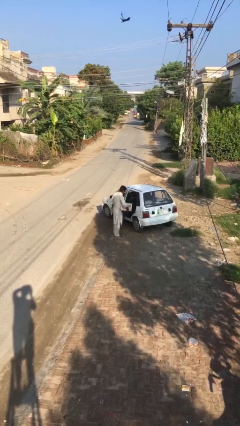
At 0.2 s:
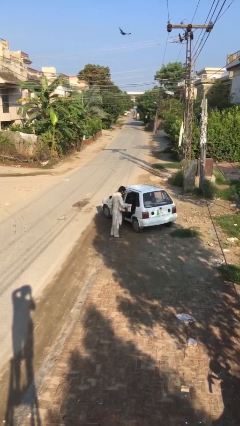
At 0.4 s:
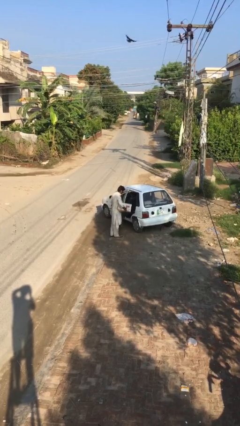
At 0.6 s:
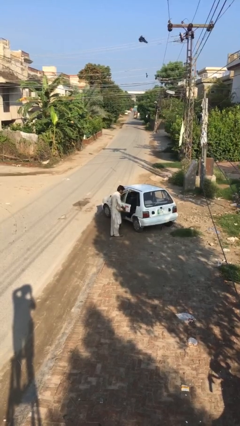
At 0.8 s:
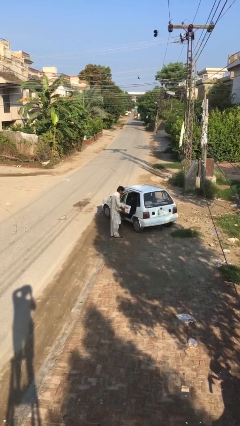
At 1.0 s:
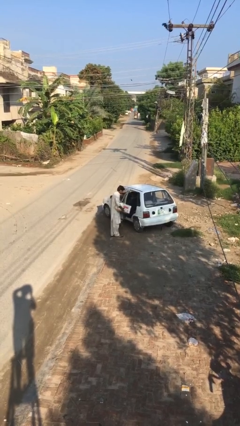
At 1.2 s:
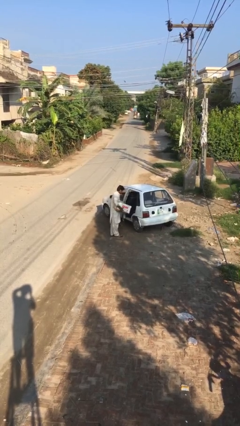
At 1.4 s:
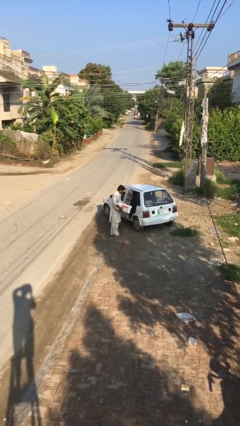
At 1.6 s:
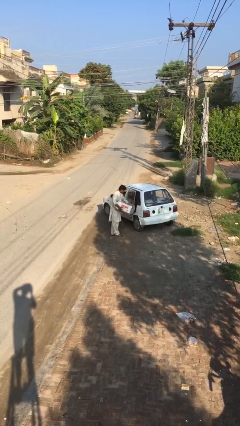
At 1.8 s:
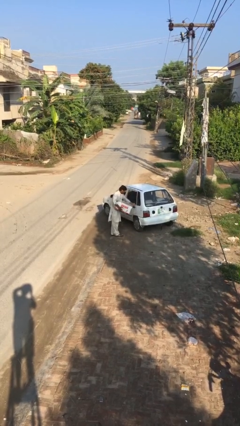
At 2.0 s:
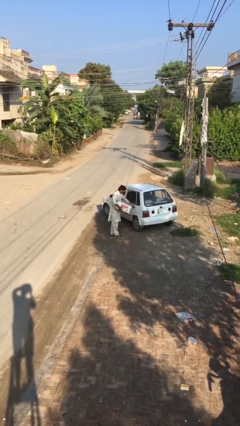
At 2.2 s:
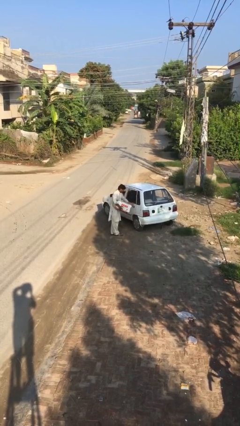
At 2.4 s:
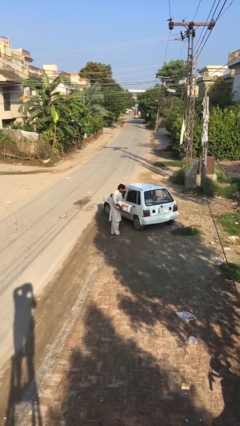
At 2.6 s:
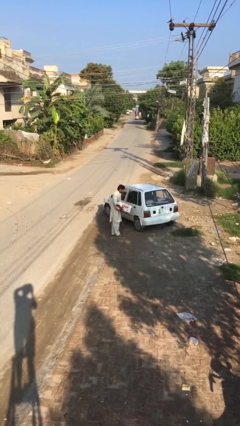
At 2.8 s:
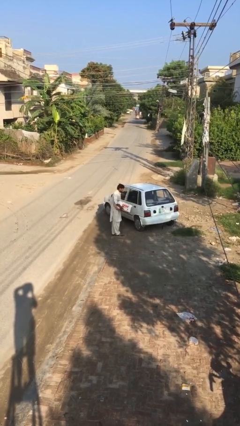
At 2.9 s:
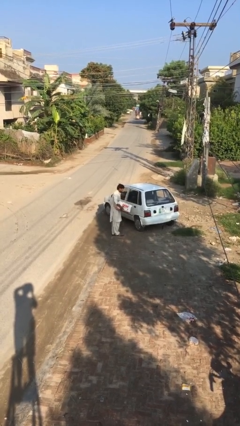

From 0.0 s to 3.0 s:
person closes car door

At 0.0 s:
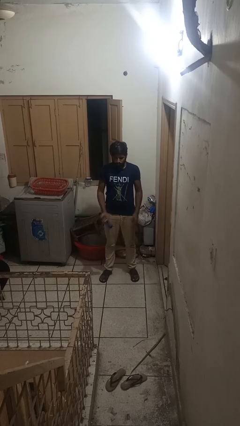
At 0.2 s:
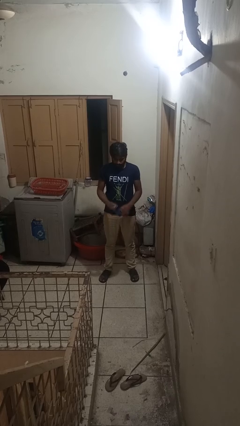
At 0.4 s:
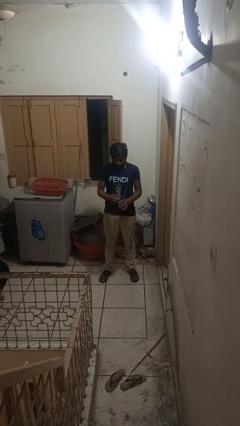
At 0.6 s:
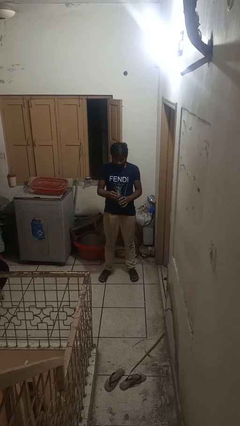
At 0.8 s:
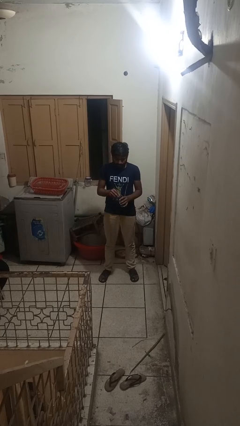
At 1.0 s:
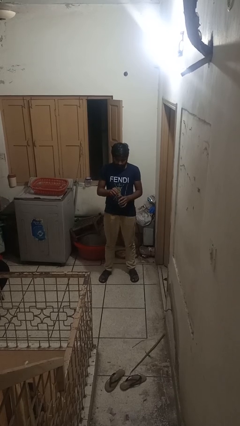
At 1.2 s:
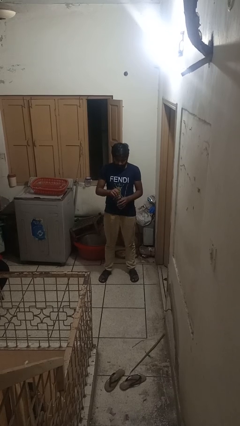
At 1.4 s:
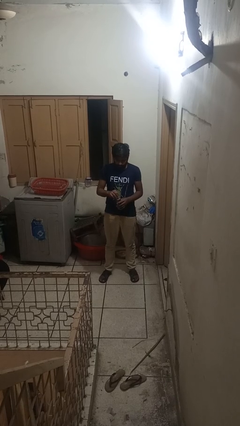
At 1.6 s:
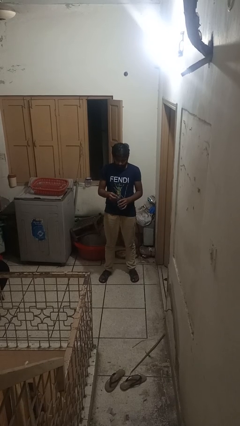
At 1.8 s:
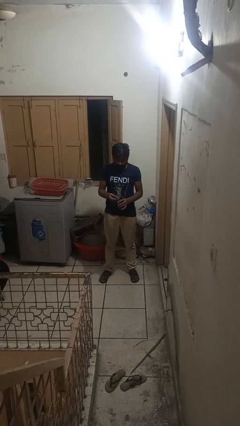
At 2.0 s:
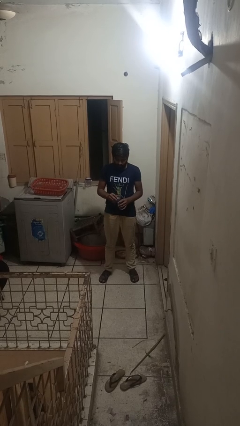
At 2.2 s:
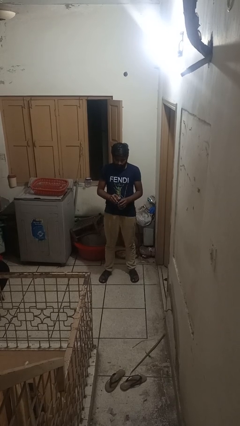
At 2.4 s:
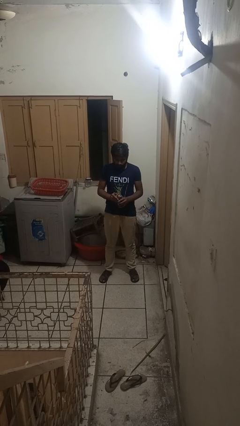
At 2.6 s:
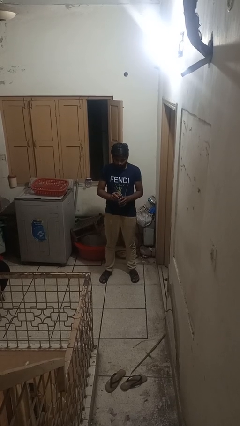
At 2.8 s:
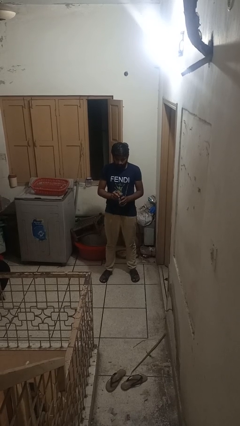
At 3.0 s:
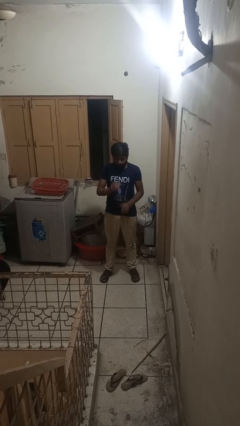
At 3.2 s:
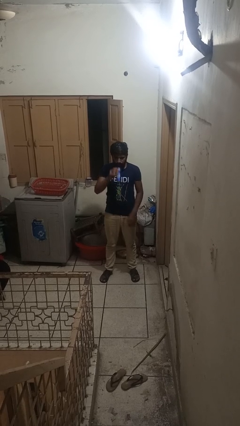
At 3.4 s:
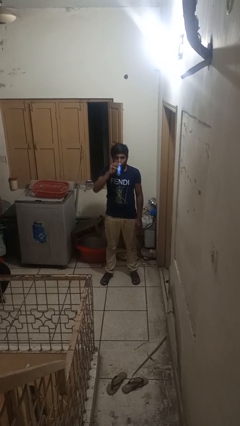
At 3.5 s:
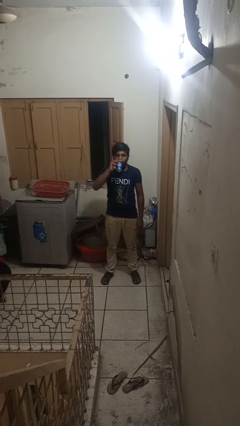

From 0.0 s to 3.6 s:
person opens beverage can

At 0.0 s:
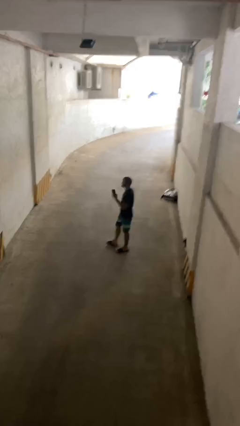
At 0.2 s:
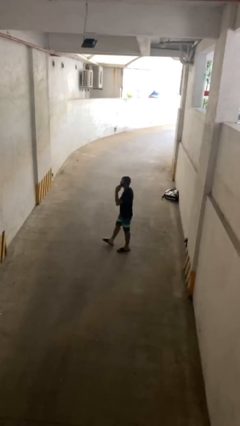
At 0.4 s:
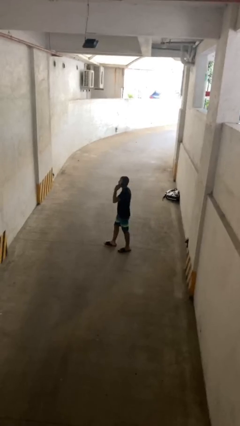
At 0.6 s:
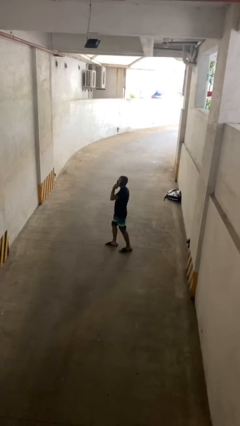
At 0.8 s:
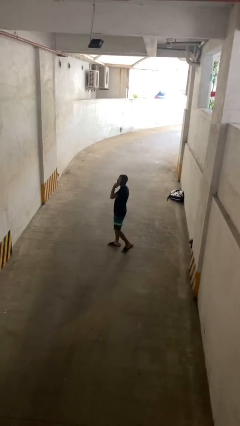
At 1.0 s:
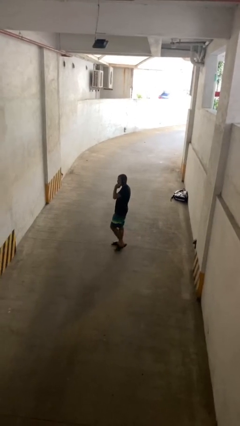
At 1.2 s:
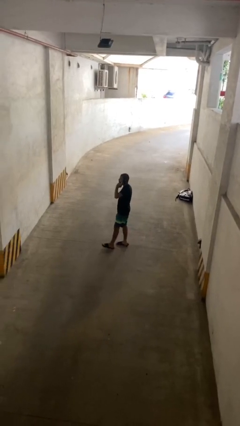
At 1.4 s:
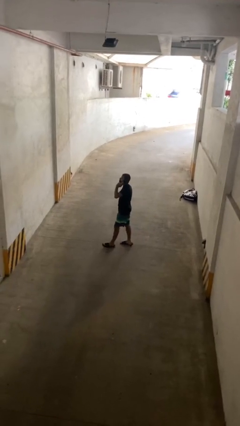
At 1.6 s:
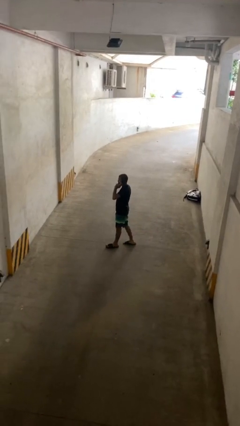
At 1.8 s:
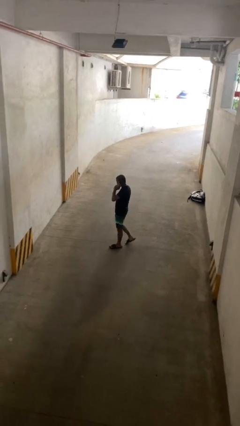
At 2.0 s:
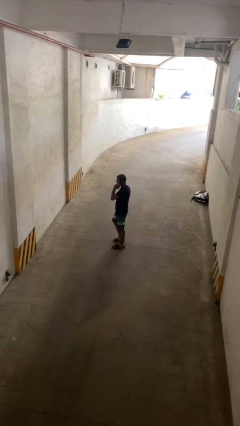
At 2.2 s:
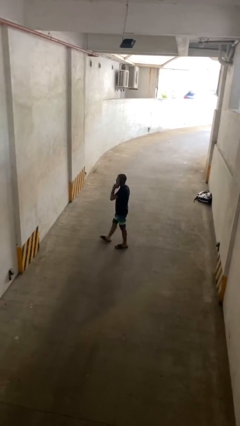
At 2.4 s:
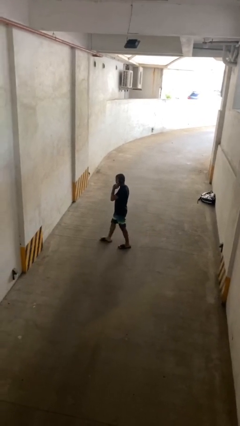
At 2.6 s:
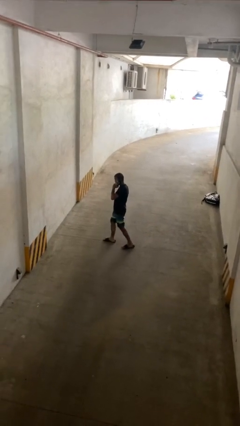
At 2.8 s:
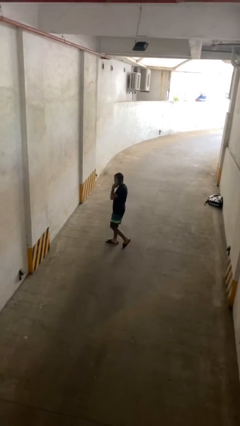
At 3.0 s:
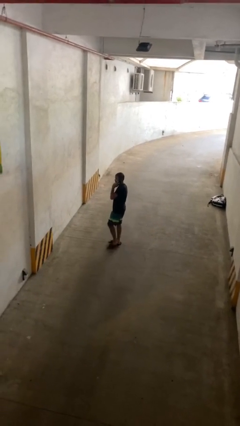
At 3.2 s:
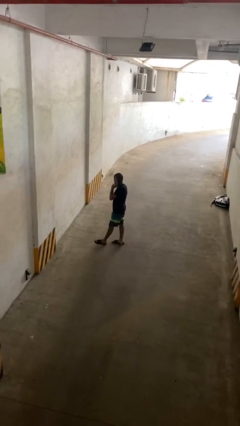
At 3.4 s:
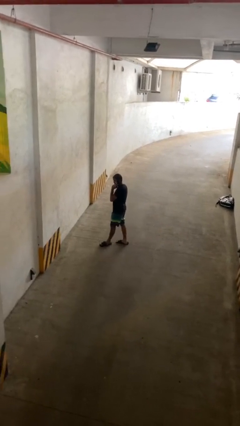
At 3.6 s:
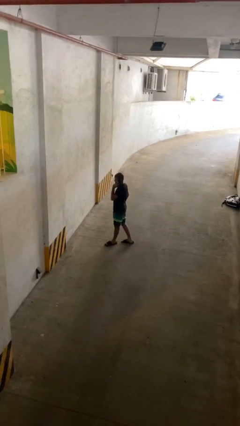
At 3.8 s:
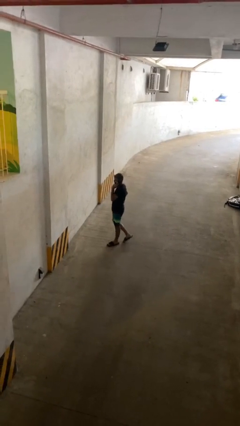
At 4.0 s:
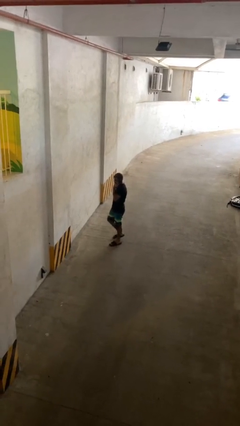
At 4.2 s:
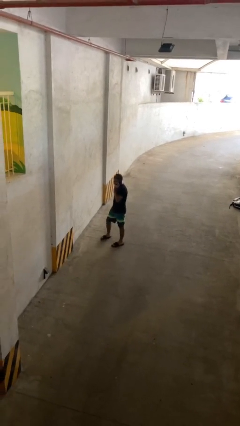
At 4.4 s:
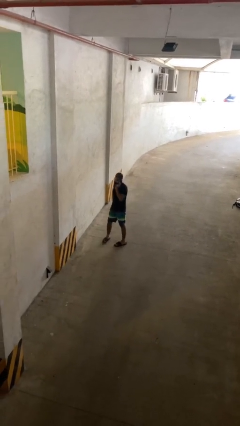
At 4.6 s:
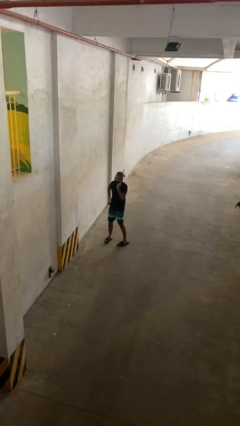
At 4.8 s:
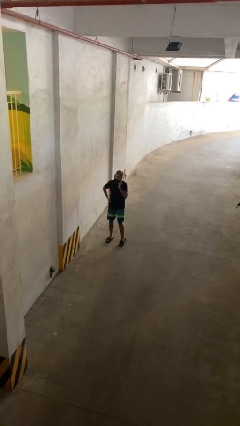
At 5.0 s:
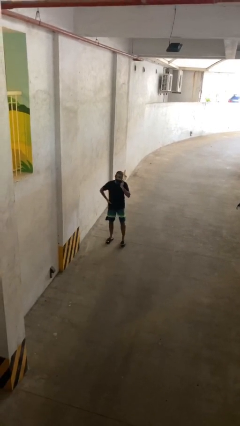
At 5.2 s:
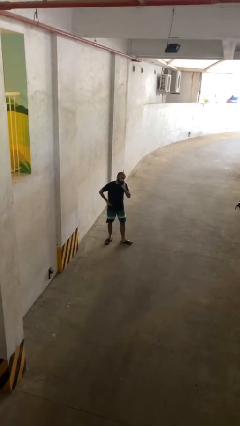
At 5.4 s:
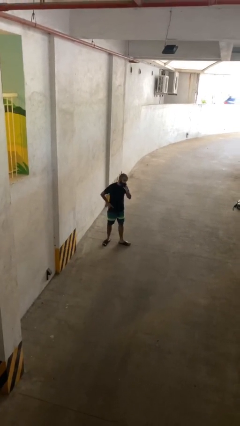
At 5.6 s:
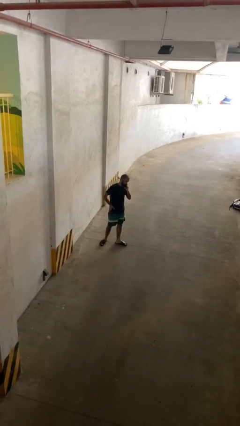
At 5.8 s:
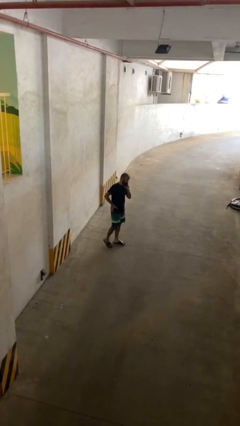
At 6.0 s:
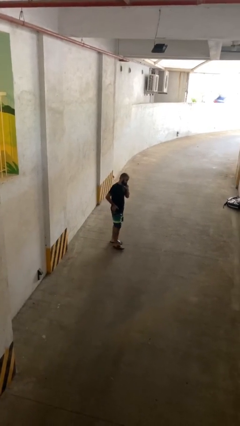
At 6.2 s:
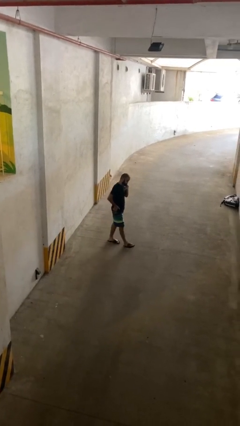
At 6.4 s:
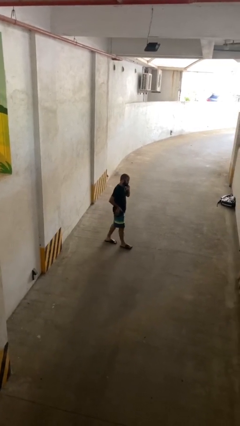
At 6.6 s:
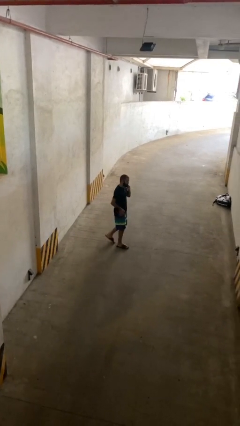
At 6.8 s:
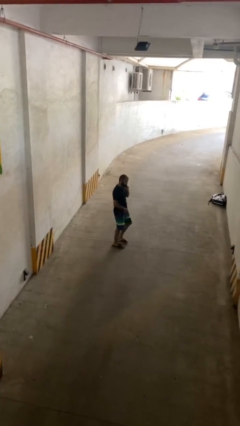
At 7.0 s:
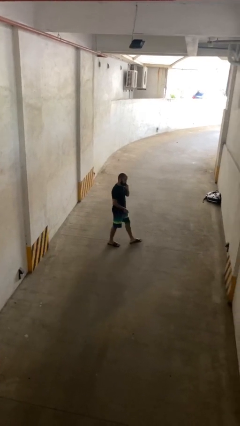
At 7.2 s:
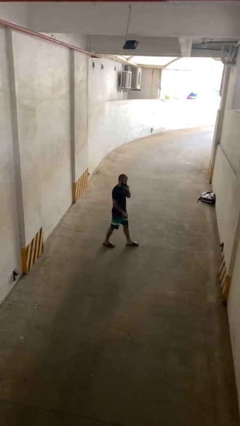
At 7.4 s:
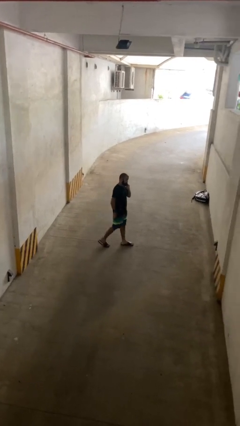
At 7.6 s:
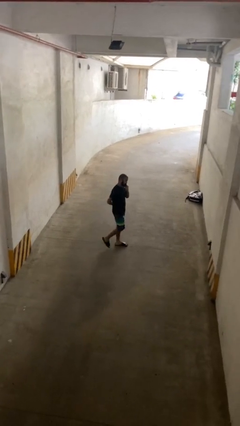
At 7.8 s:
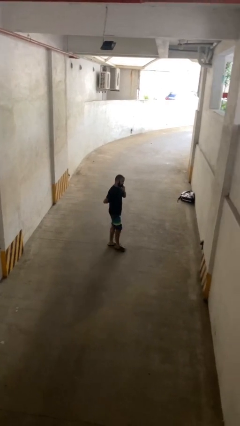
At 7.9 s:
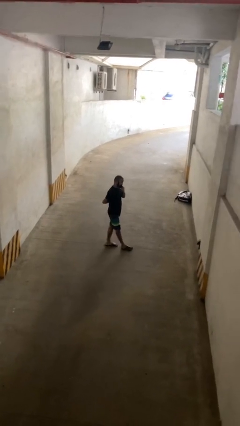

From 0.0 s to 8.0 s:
person talks on phone

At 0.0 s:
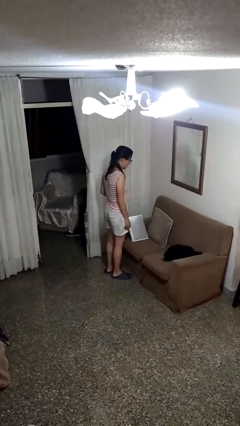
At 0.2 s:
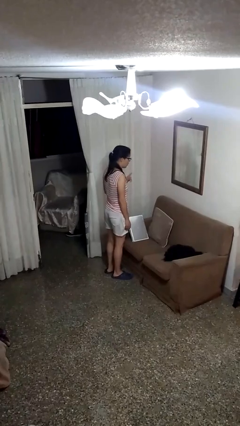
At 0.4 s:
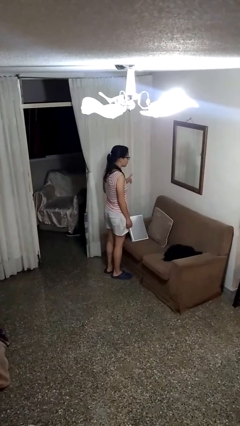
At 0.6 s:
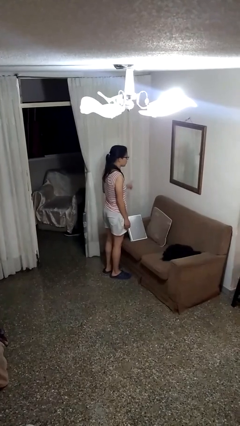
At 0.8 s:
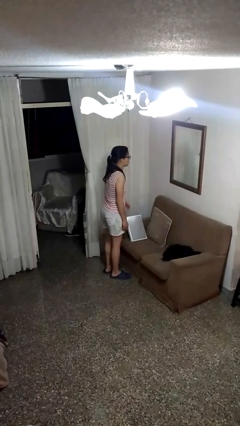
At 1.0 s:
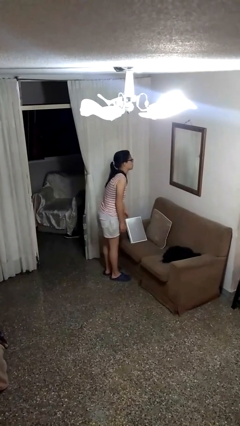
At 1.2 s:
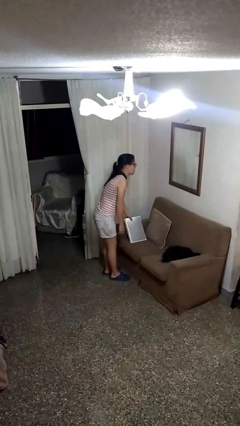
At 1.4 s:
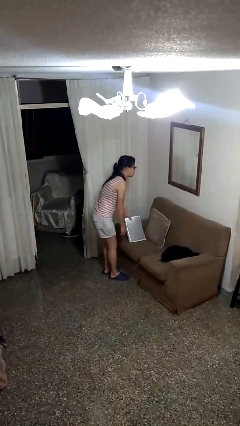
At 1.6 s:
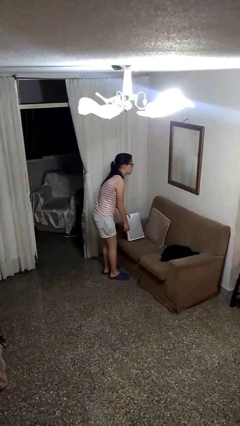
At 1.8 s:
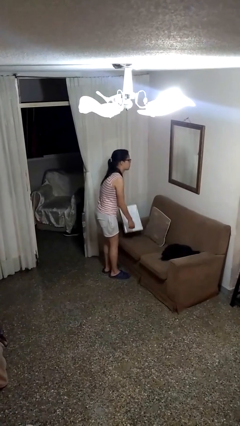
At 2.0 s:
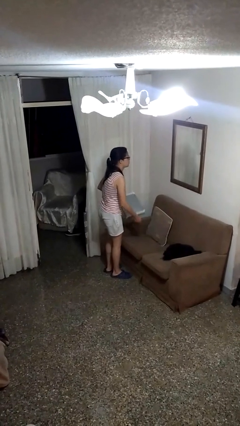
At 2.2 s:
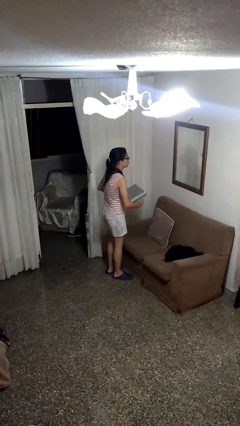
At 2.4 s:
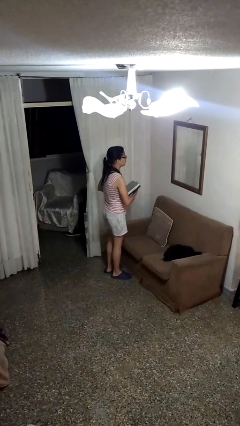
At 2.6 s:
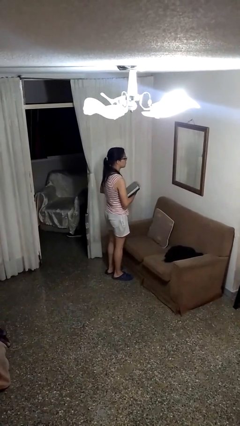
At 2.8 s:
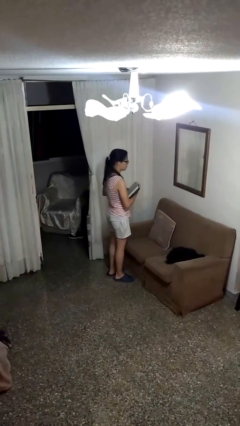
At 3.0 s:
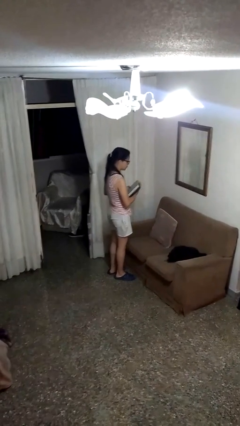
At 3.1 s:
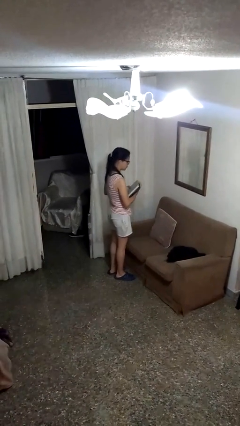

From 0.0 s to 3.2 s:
person picks up object from couch
